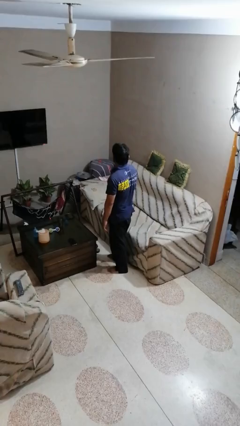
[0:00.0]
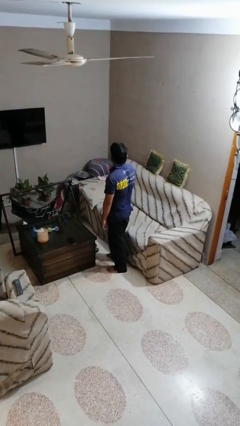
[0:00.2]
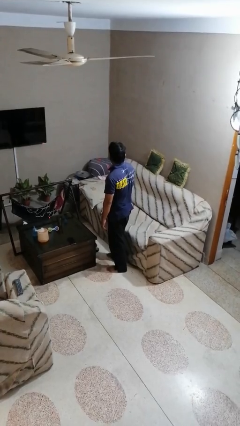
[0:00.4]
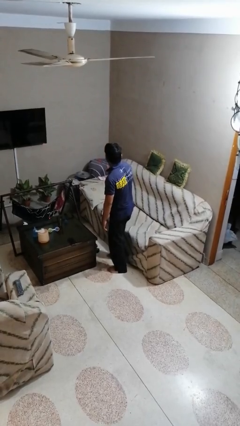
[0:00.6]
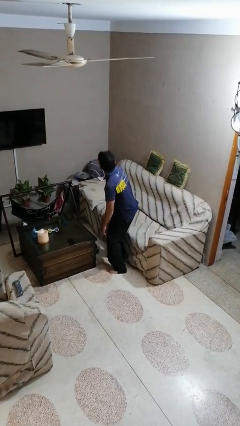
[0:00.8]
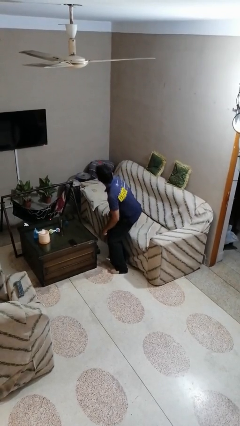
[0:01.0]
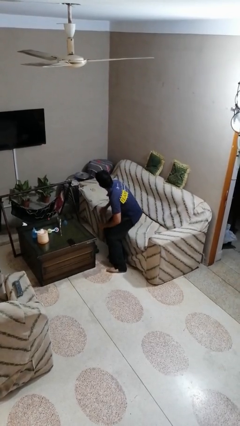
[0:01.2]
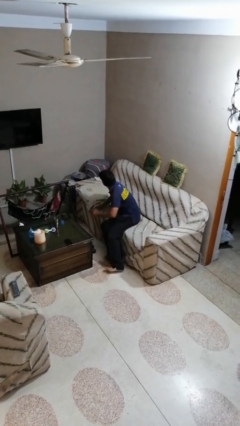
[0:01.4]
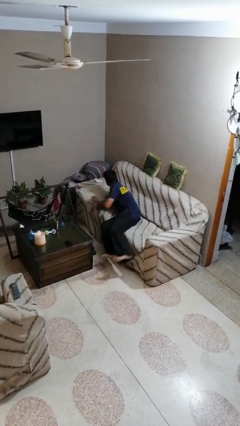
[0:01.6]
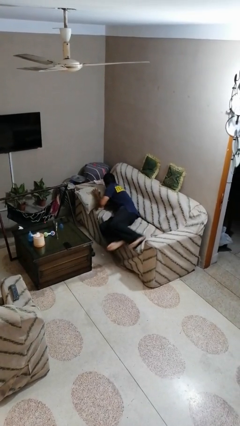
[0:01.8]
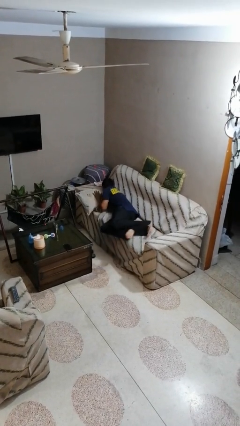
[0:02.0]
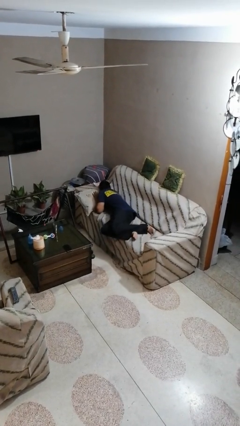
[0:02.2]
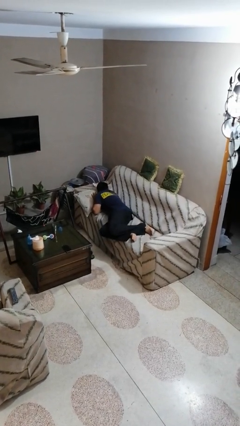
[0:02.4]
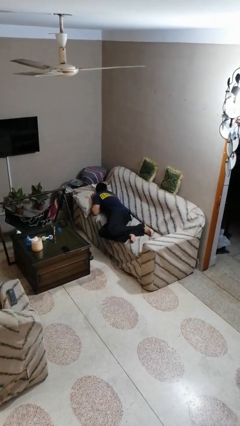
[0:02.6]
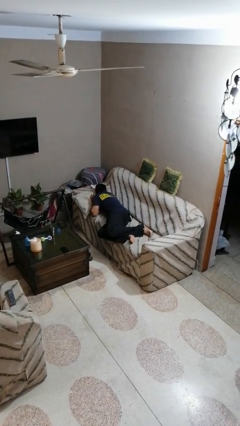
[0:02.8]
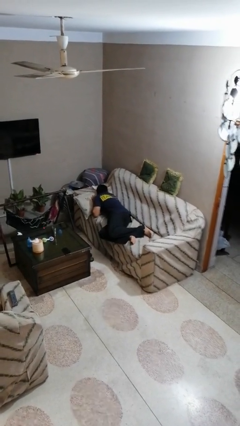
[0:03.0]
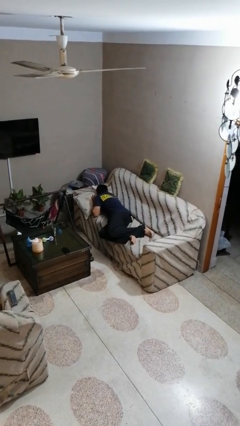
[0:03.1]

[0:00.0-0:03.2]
person lies down on couch

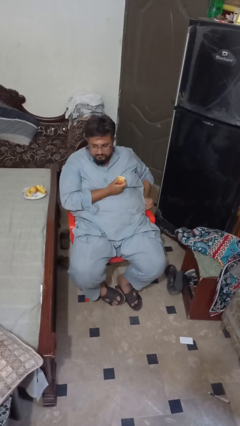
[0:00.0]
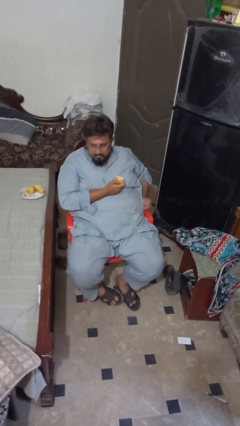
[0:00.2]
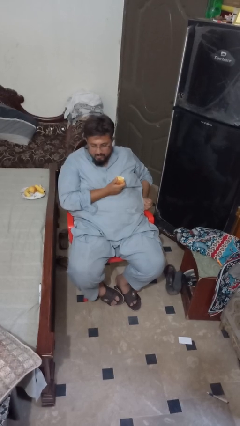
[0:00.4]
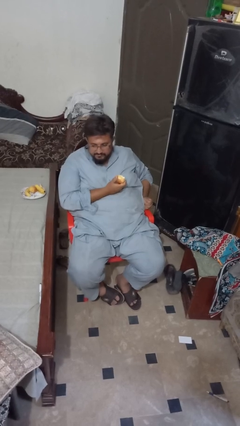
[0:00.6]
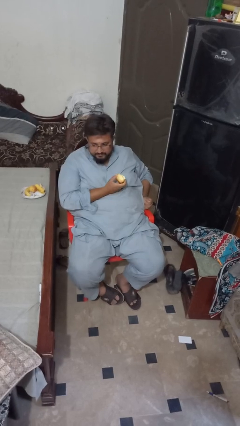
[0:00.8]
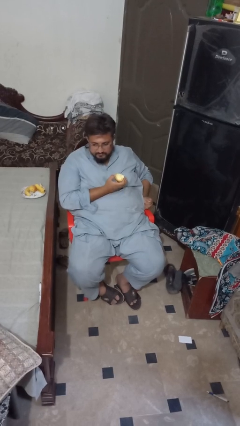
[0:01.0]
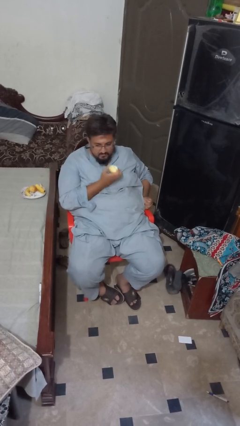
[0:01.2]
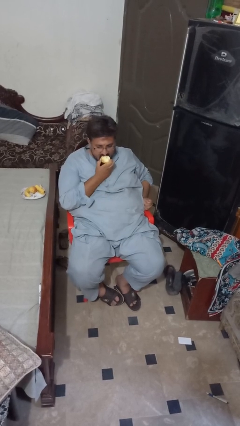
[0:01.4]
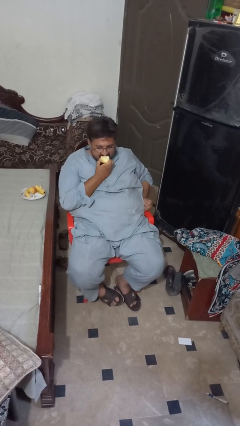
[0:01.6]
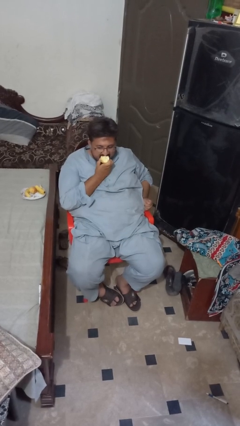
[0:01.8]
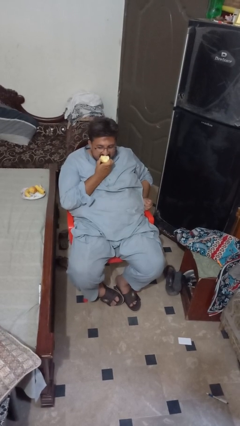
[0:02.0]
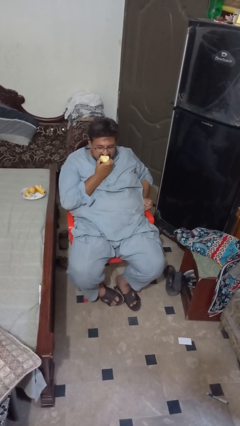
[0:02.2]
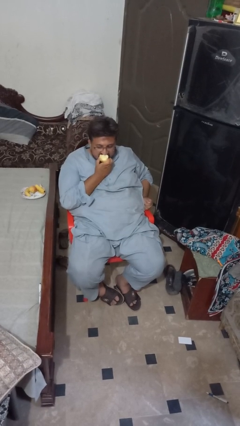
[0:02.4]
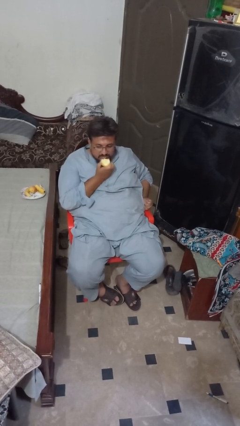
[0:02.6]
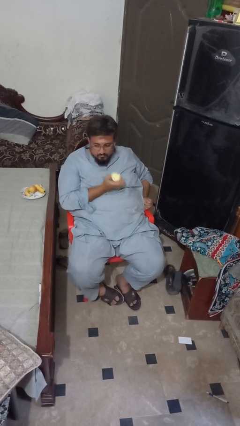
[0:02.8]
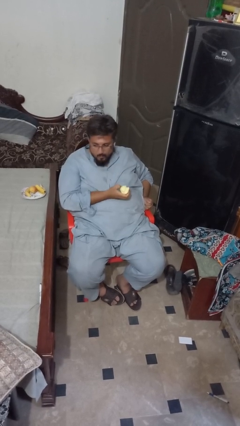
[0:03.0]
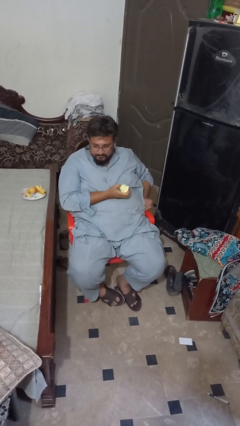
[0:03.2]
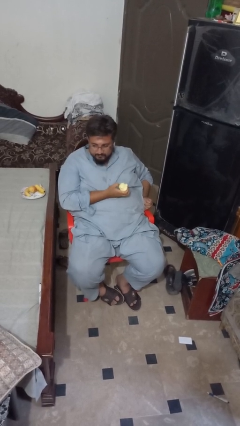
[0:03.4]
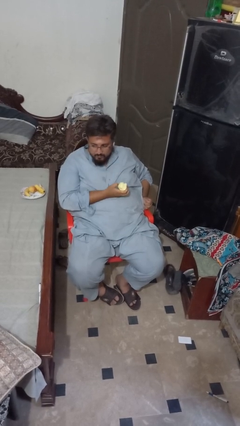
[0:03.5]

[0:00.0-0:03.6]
person eats apple

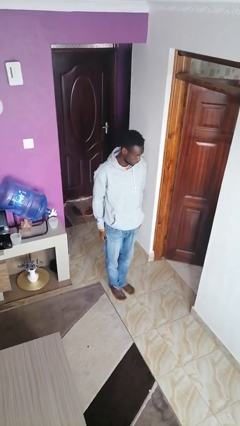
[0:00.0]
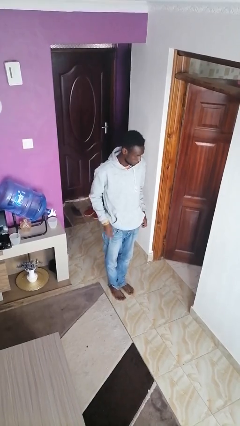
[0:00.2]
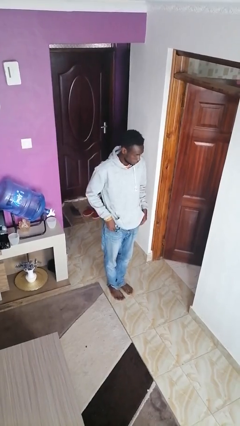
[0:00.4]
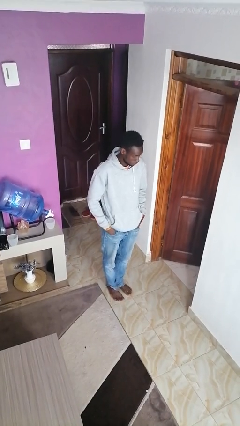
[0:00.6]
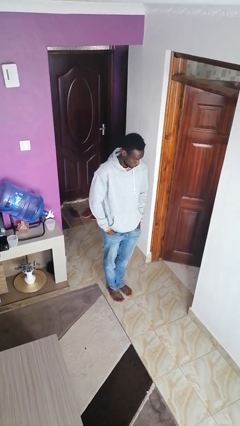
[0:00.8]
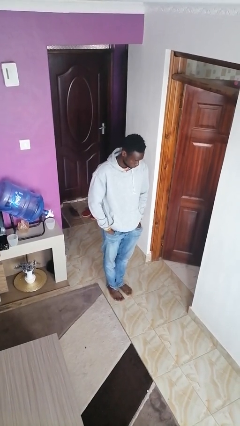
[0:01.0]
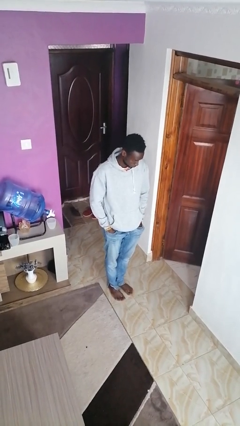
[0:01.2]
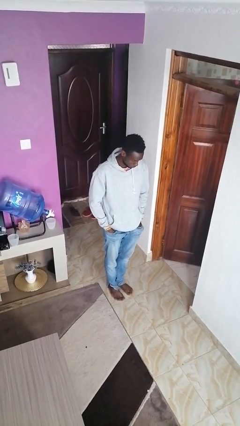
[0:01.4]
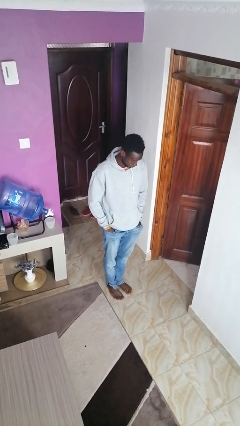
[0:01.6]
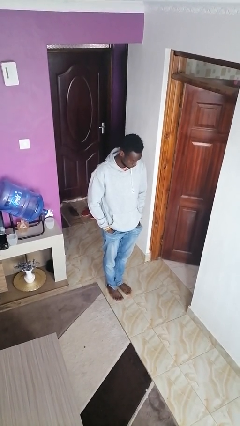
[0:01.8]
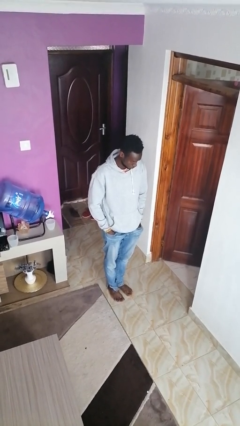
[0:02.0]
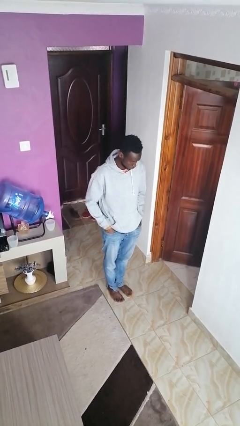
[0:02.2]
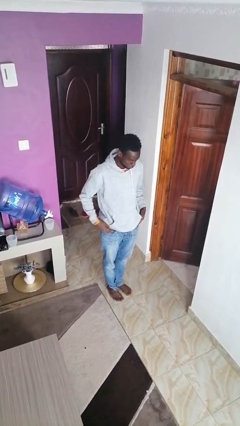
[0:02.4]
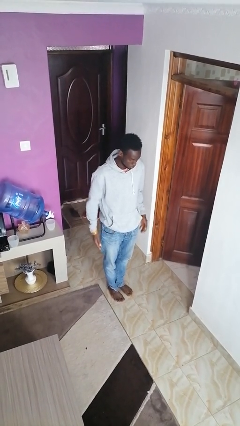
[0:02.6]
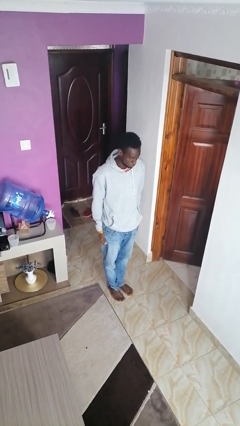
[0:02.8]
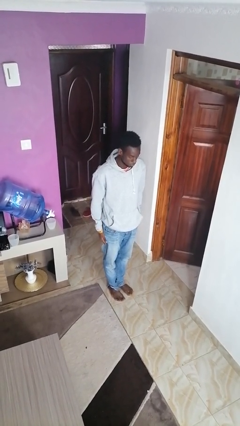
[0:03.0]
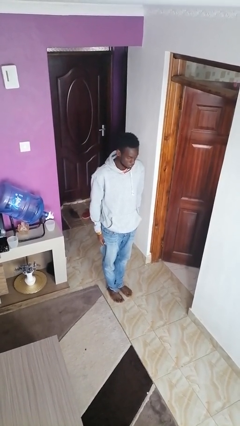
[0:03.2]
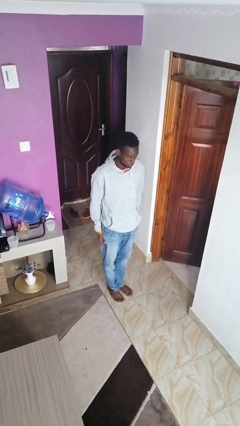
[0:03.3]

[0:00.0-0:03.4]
person puts hands in back pockets

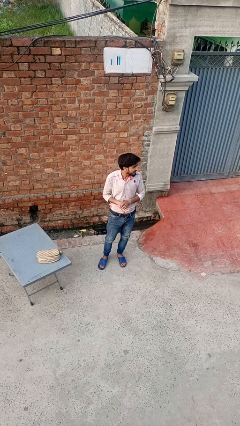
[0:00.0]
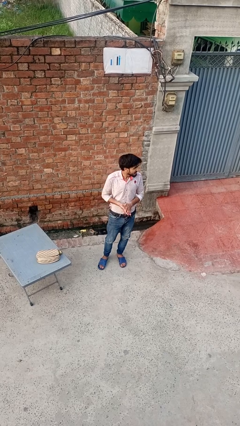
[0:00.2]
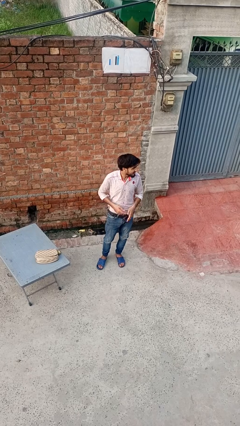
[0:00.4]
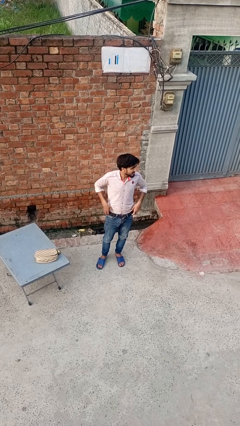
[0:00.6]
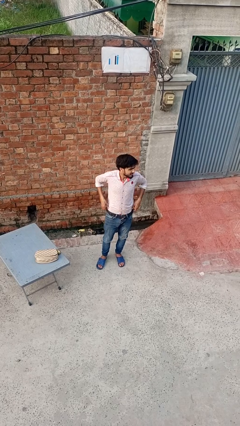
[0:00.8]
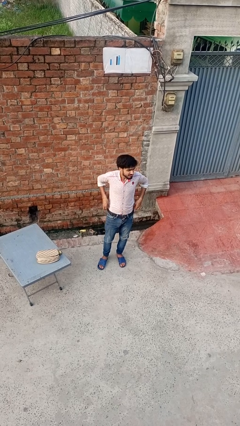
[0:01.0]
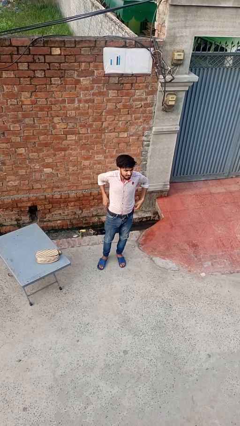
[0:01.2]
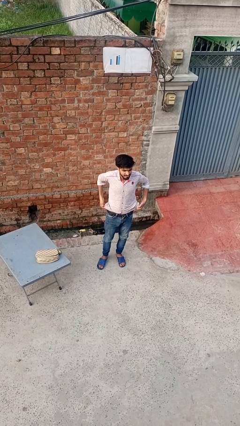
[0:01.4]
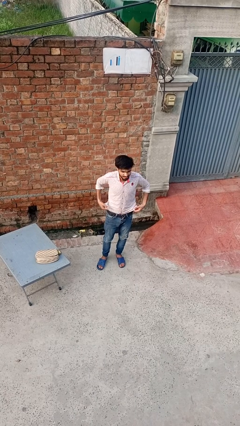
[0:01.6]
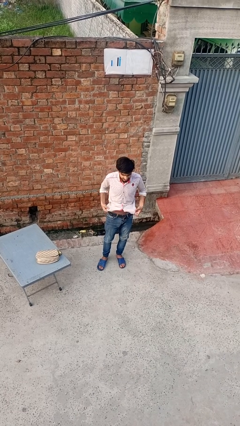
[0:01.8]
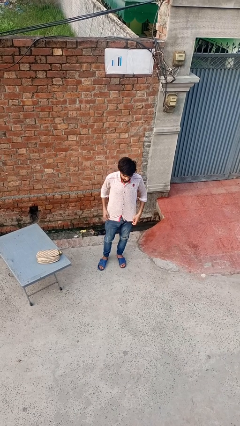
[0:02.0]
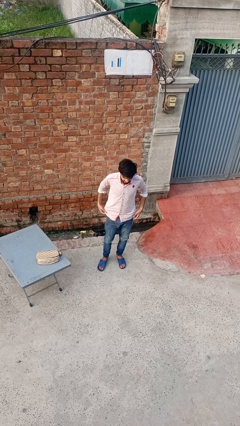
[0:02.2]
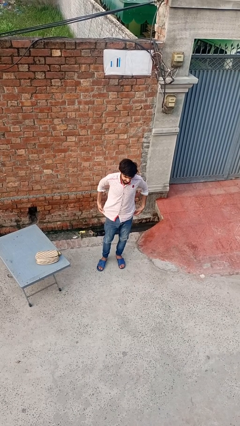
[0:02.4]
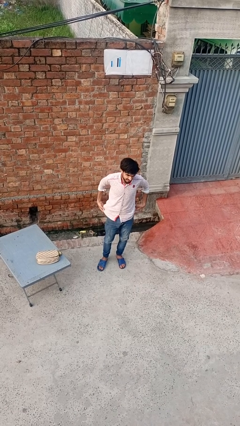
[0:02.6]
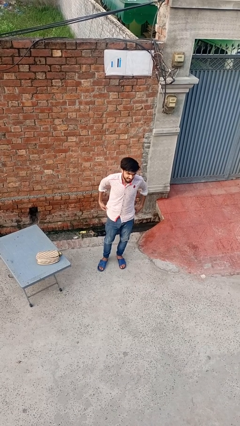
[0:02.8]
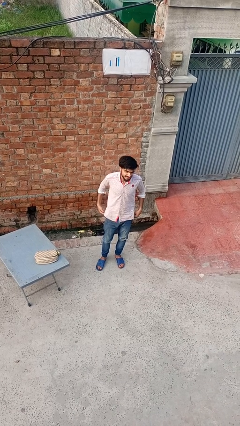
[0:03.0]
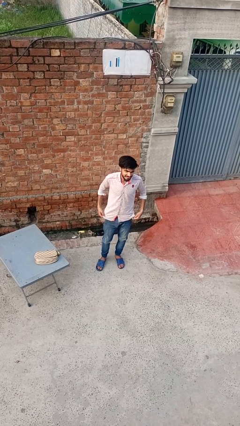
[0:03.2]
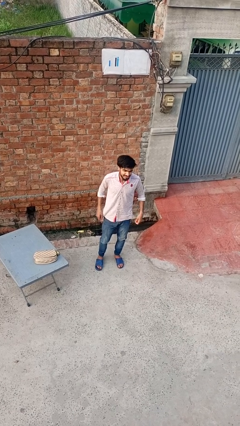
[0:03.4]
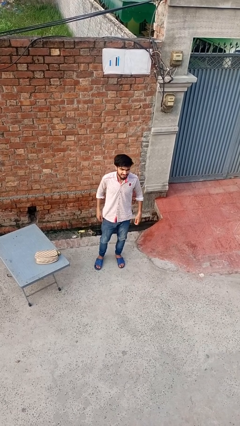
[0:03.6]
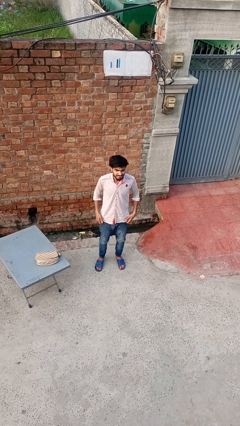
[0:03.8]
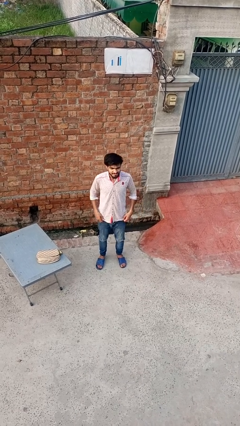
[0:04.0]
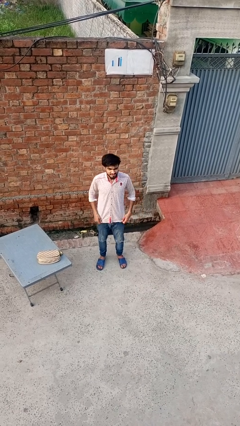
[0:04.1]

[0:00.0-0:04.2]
person untucks shirt

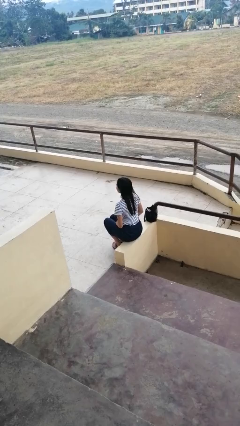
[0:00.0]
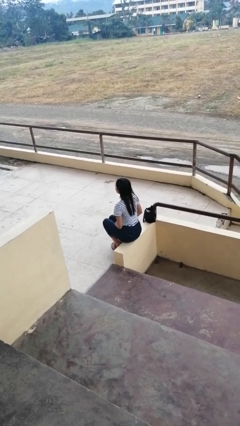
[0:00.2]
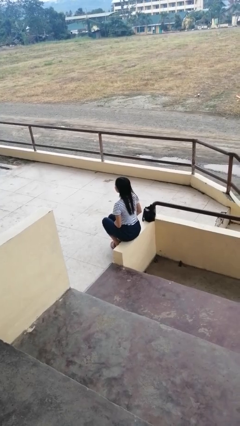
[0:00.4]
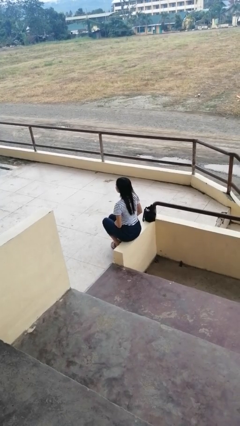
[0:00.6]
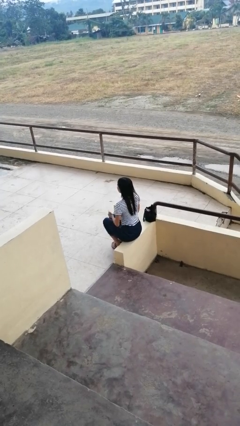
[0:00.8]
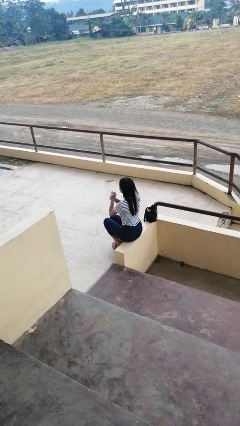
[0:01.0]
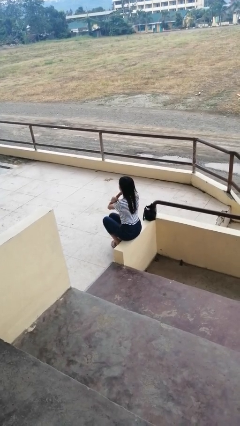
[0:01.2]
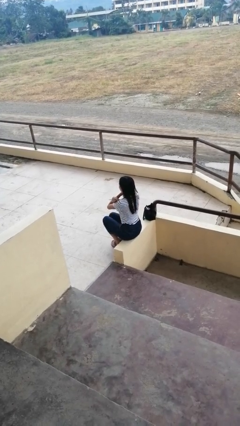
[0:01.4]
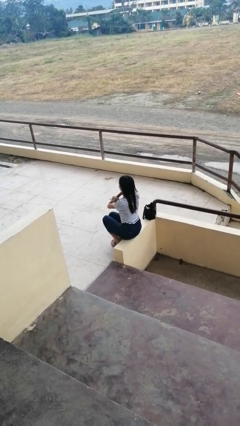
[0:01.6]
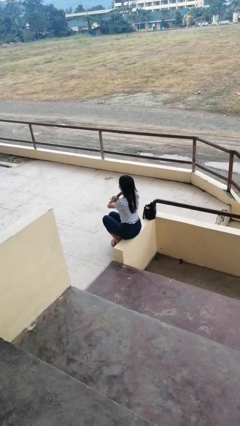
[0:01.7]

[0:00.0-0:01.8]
person gestures arms x

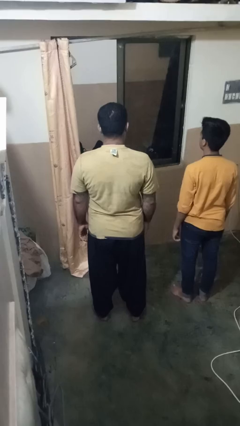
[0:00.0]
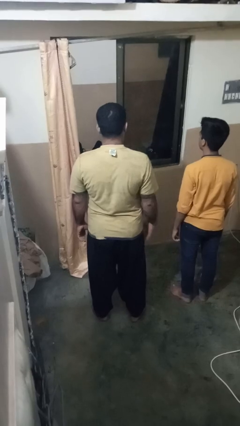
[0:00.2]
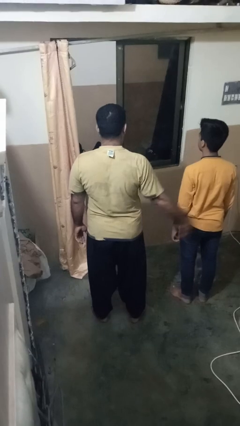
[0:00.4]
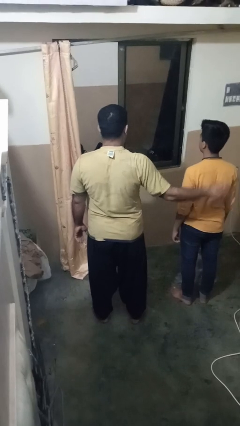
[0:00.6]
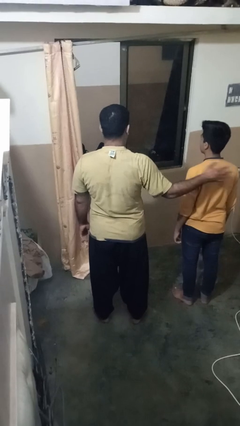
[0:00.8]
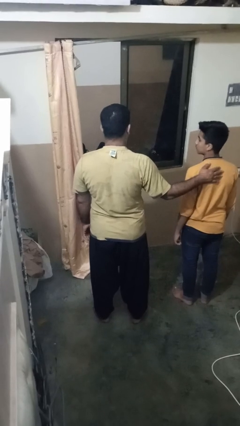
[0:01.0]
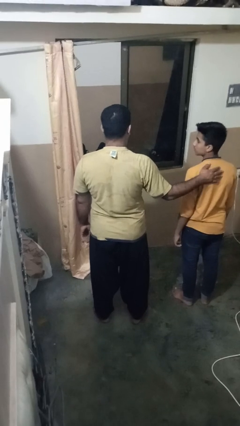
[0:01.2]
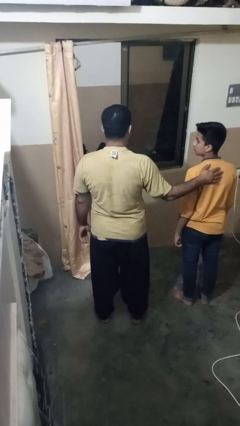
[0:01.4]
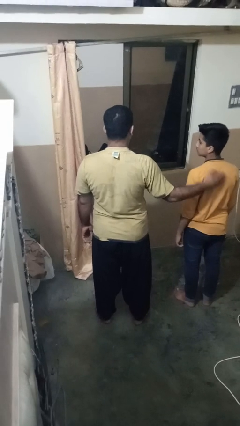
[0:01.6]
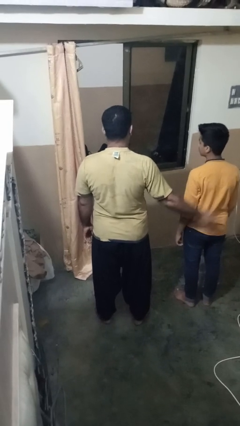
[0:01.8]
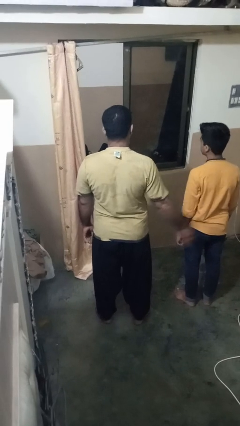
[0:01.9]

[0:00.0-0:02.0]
person touches back of person
